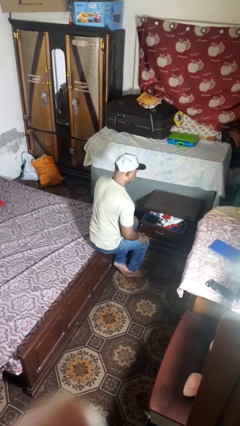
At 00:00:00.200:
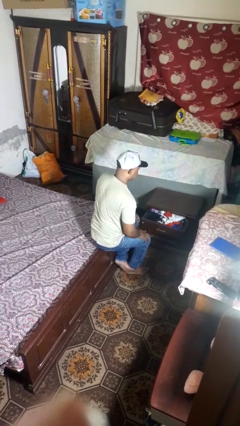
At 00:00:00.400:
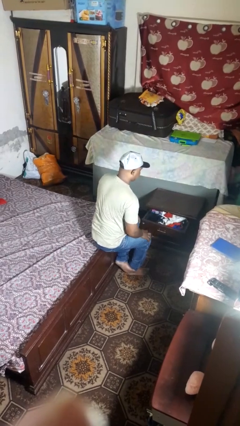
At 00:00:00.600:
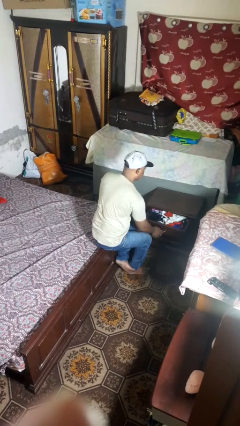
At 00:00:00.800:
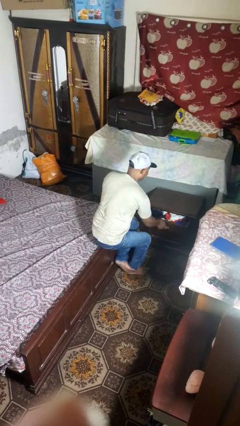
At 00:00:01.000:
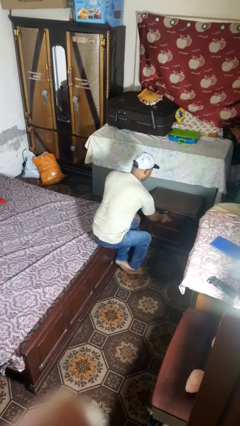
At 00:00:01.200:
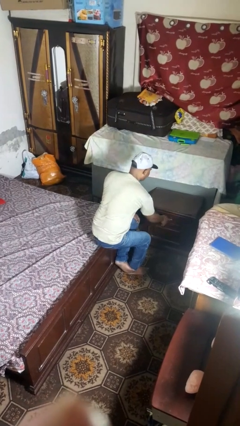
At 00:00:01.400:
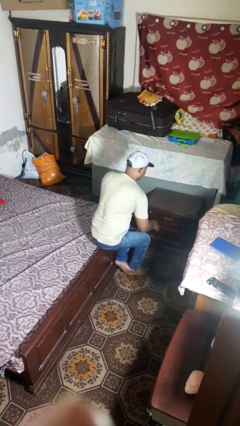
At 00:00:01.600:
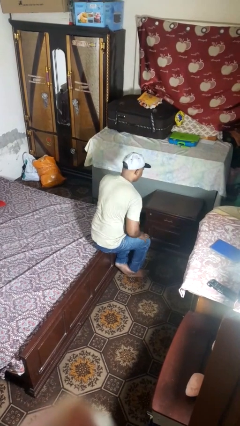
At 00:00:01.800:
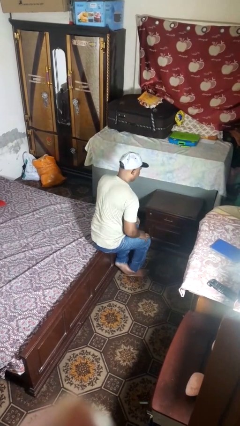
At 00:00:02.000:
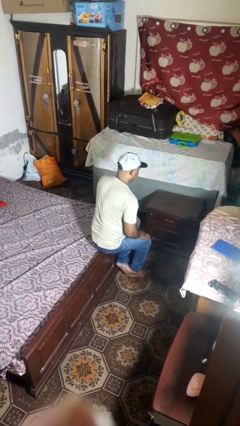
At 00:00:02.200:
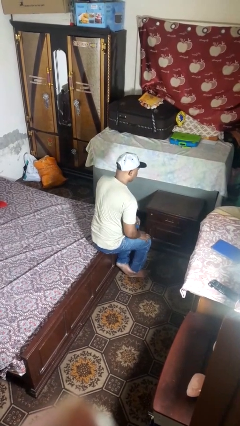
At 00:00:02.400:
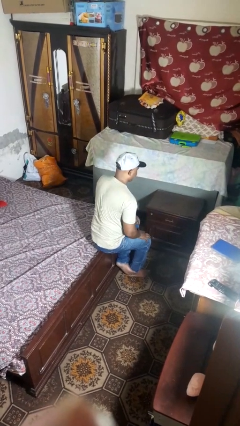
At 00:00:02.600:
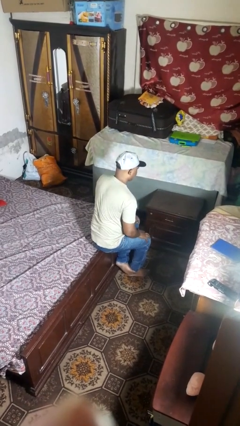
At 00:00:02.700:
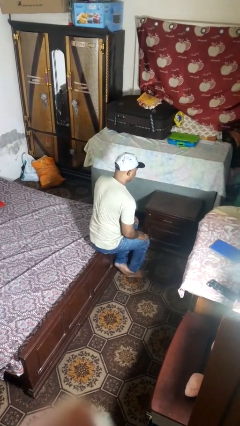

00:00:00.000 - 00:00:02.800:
person closes dresser drawer

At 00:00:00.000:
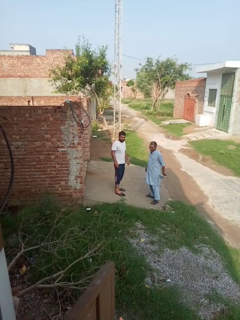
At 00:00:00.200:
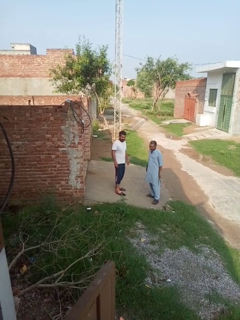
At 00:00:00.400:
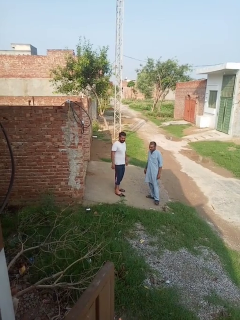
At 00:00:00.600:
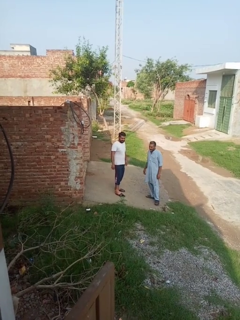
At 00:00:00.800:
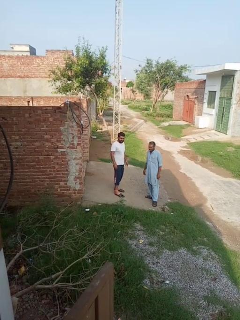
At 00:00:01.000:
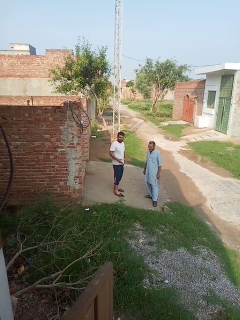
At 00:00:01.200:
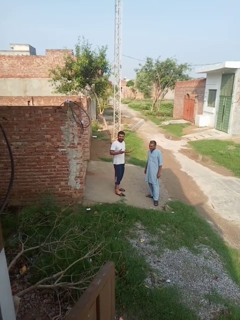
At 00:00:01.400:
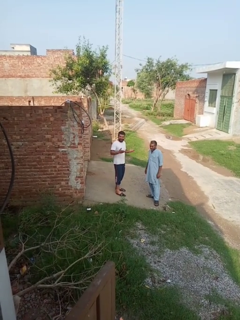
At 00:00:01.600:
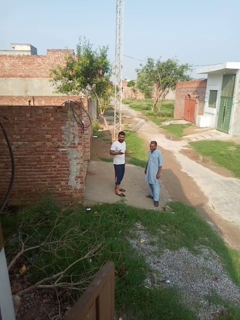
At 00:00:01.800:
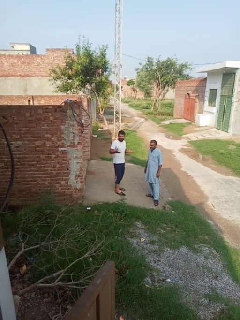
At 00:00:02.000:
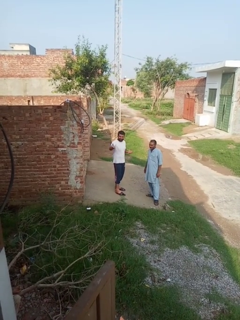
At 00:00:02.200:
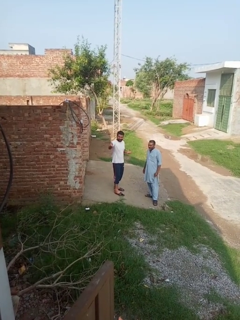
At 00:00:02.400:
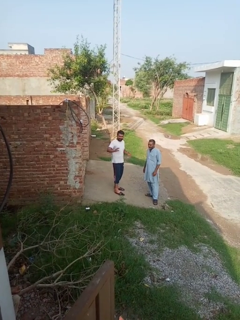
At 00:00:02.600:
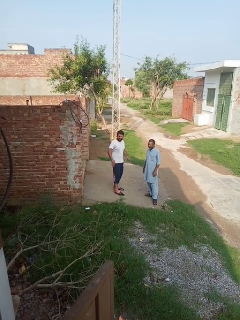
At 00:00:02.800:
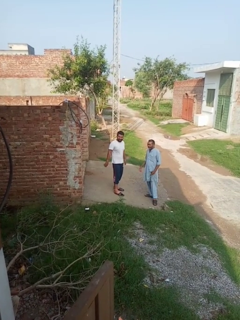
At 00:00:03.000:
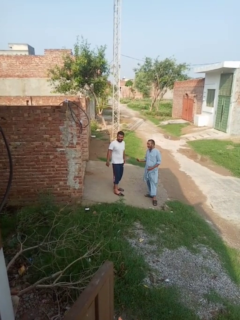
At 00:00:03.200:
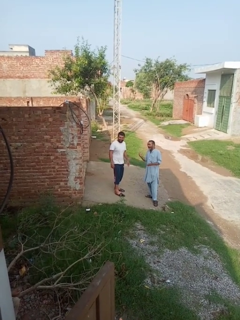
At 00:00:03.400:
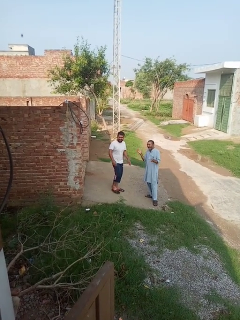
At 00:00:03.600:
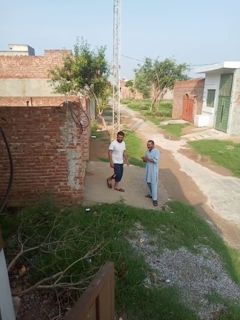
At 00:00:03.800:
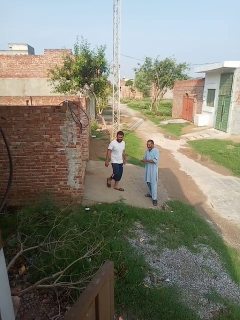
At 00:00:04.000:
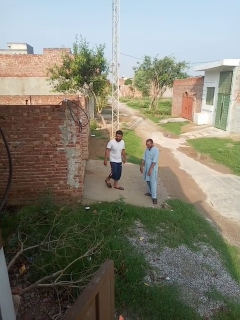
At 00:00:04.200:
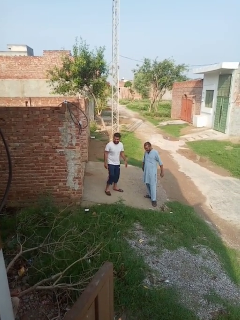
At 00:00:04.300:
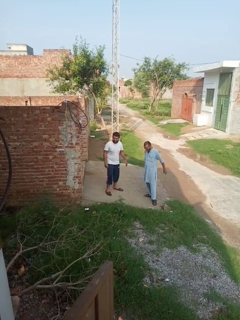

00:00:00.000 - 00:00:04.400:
person laughs with person

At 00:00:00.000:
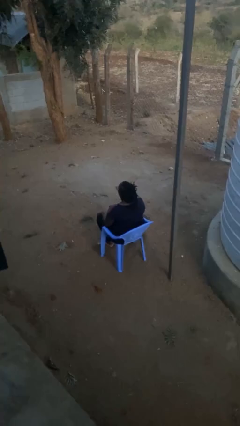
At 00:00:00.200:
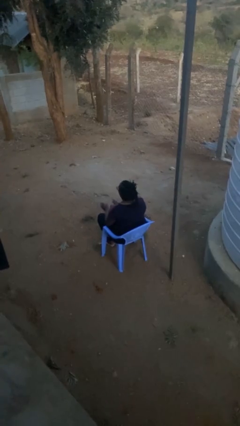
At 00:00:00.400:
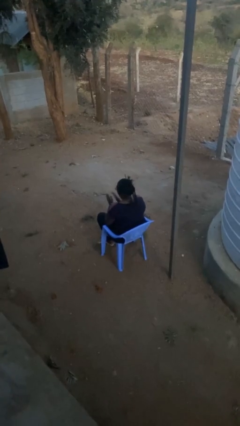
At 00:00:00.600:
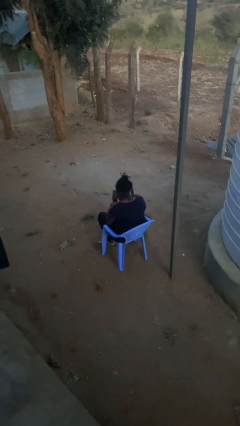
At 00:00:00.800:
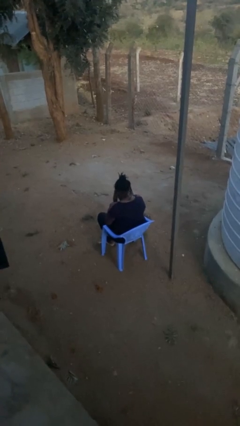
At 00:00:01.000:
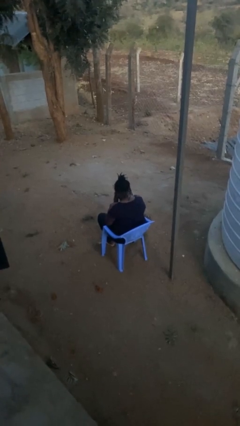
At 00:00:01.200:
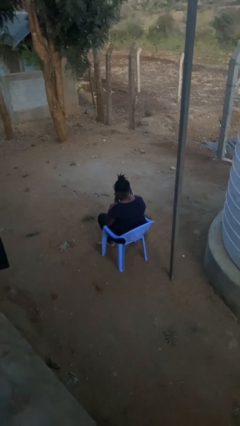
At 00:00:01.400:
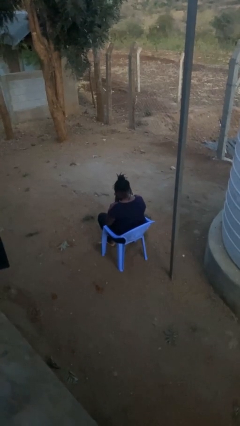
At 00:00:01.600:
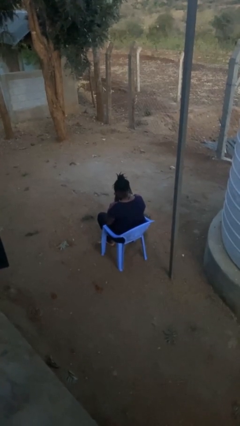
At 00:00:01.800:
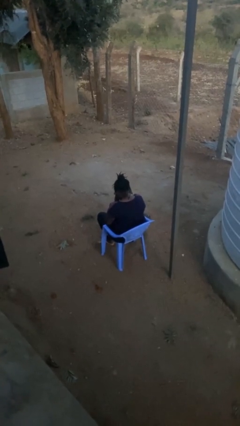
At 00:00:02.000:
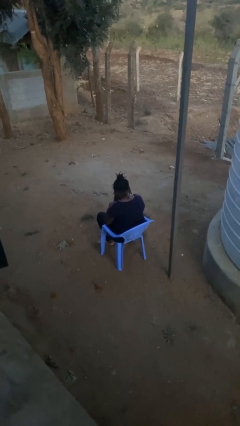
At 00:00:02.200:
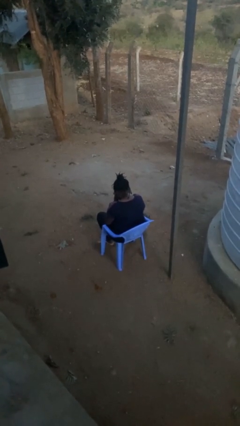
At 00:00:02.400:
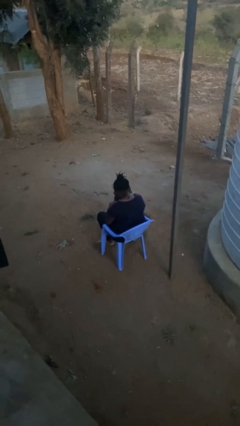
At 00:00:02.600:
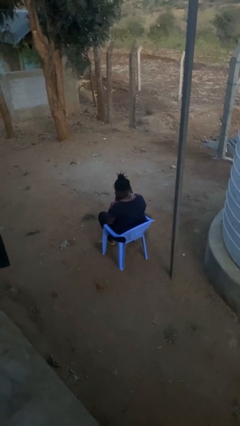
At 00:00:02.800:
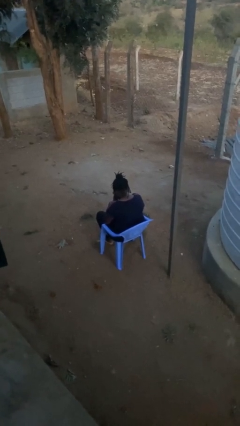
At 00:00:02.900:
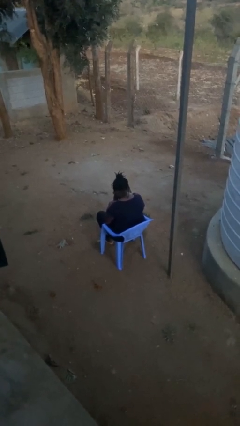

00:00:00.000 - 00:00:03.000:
person prays

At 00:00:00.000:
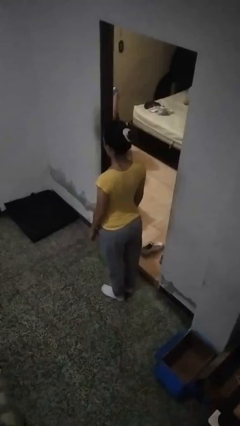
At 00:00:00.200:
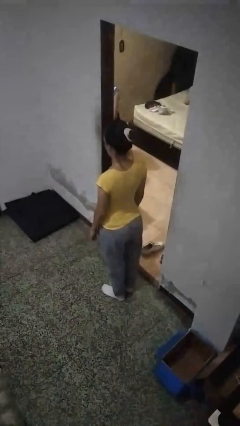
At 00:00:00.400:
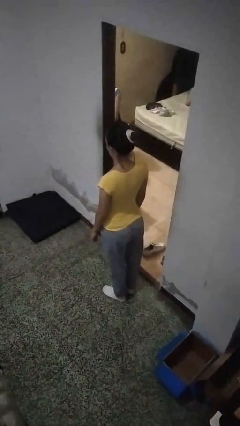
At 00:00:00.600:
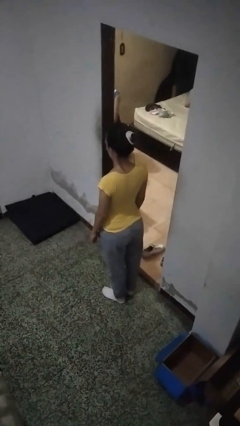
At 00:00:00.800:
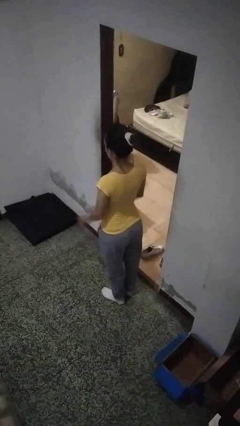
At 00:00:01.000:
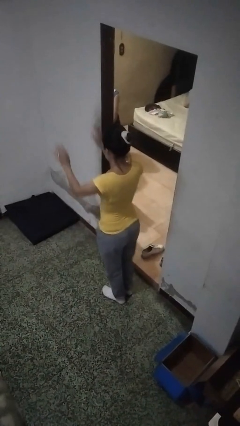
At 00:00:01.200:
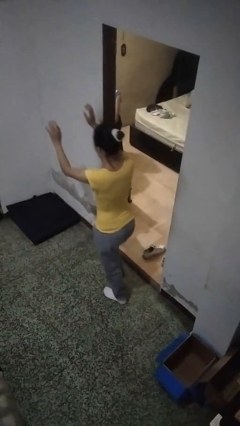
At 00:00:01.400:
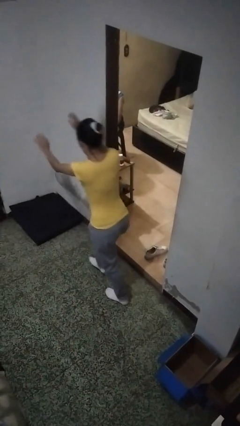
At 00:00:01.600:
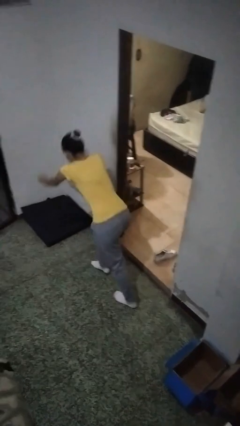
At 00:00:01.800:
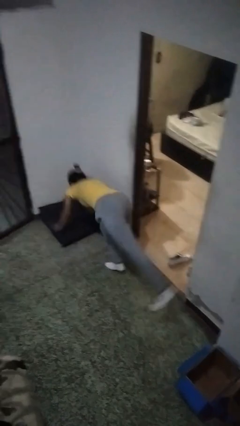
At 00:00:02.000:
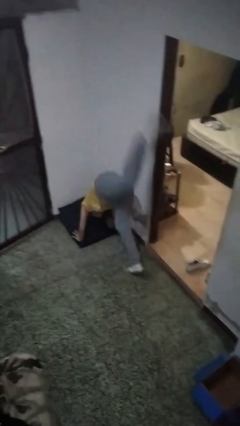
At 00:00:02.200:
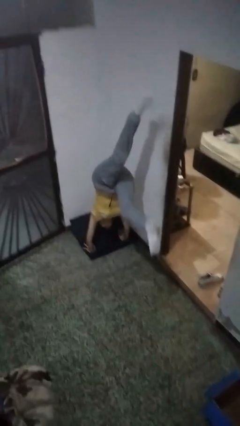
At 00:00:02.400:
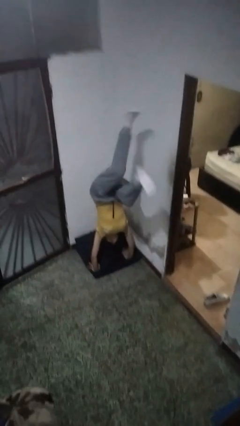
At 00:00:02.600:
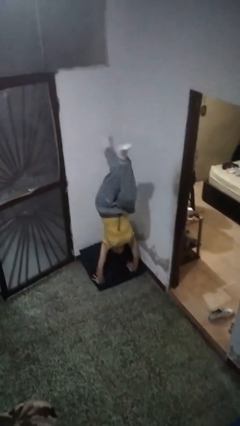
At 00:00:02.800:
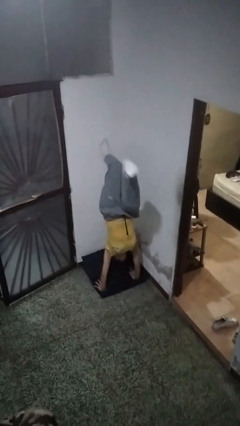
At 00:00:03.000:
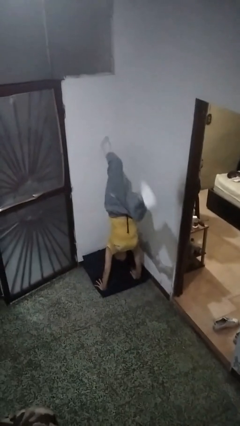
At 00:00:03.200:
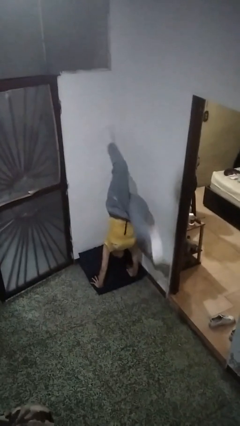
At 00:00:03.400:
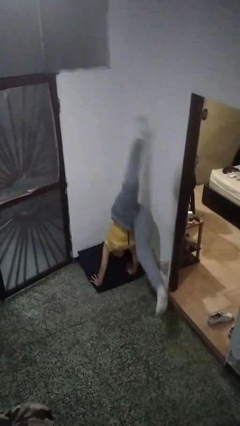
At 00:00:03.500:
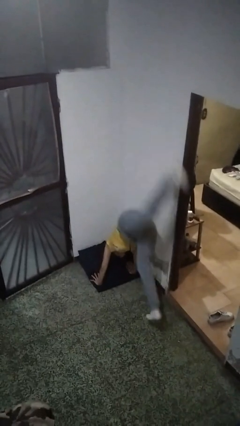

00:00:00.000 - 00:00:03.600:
person handstand

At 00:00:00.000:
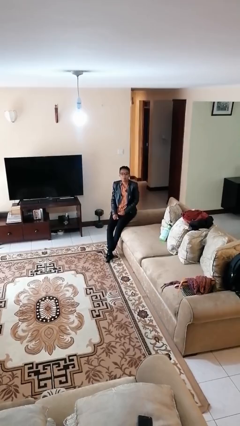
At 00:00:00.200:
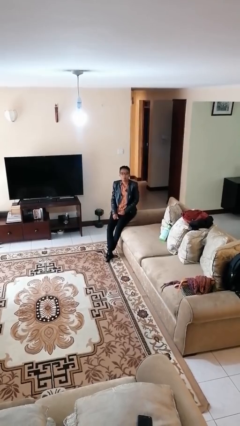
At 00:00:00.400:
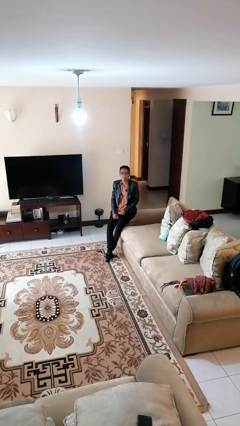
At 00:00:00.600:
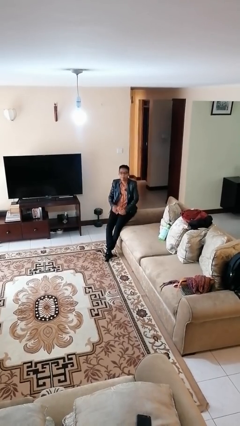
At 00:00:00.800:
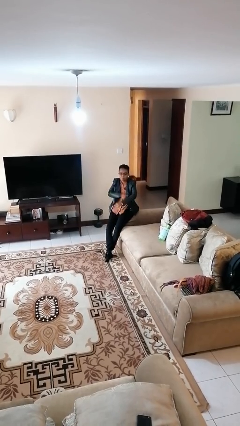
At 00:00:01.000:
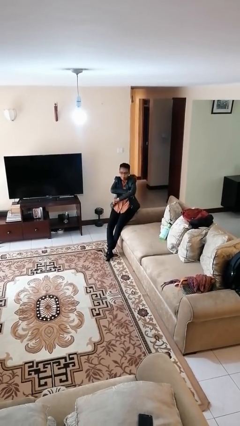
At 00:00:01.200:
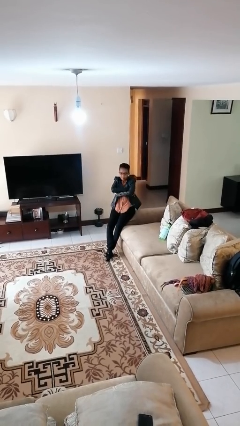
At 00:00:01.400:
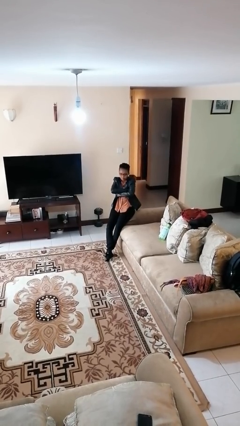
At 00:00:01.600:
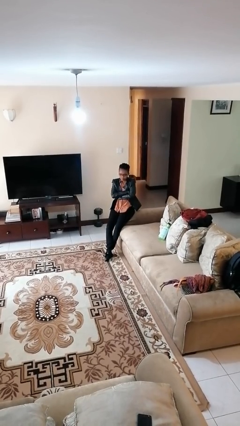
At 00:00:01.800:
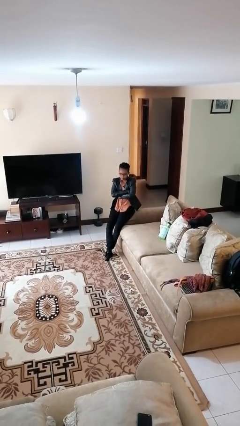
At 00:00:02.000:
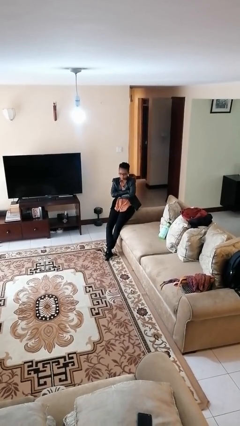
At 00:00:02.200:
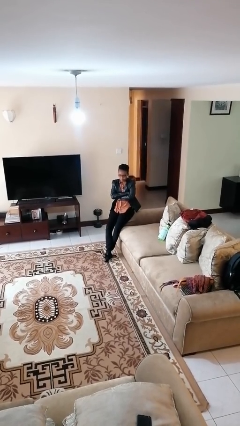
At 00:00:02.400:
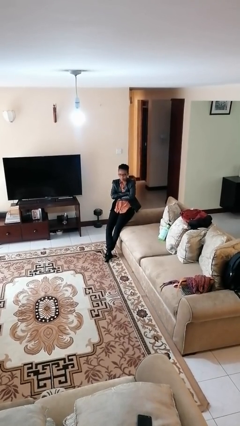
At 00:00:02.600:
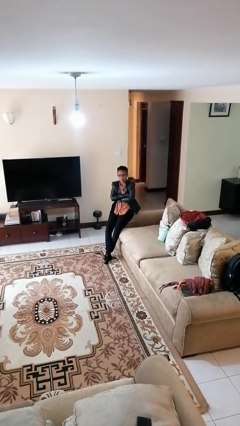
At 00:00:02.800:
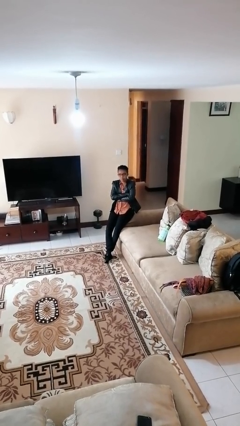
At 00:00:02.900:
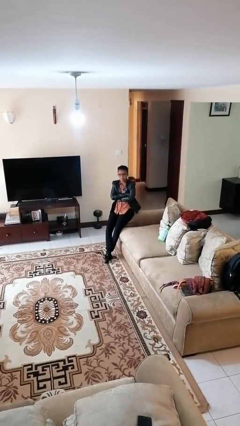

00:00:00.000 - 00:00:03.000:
person crosses arms

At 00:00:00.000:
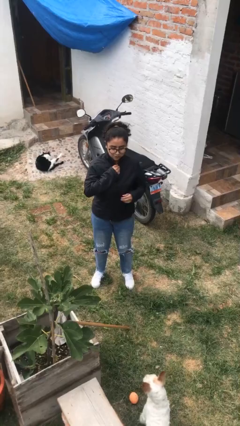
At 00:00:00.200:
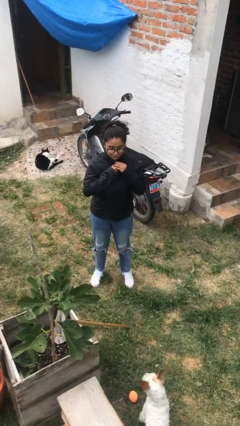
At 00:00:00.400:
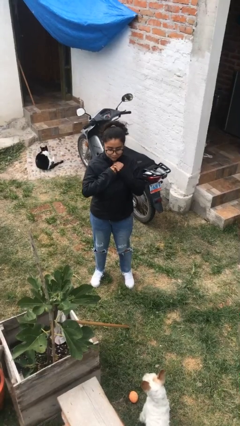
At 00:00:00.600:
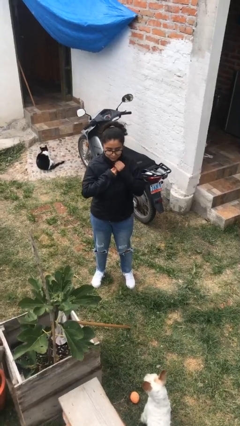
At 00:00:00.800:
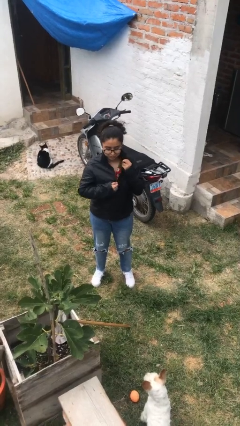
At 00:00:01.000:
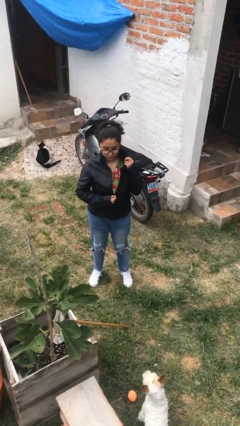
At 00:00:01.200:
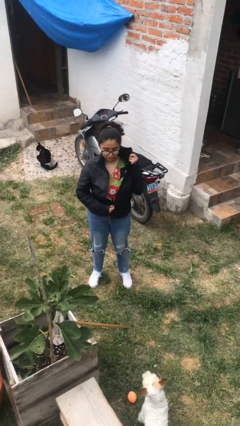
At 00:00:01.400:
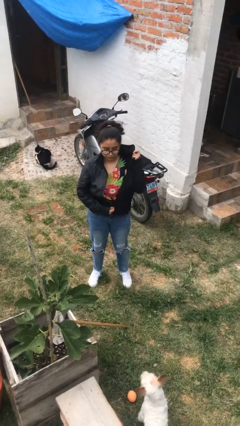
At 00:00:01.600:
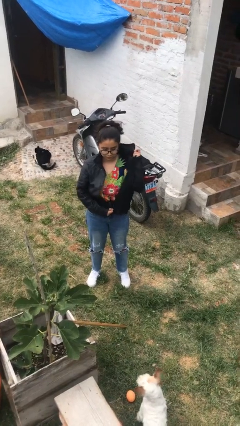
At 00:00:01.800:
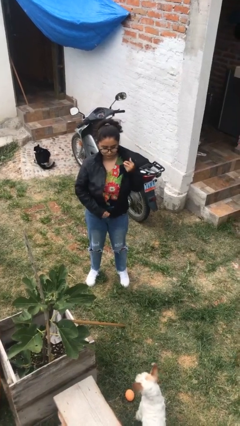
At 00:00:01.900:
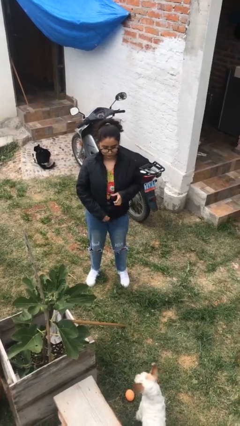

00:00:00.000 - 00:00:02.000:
person unzips jacket
